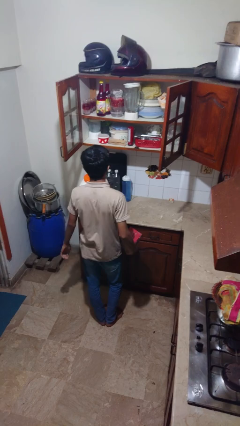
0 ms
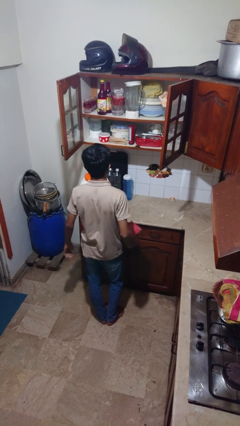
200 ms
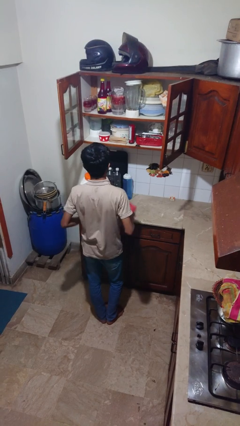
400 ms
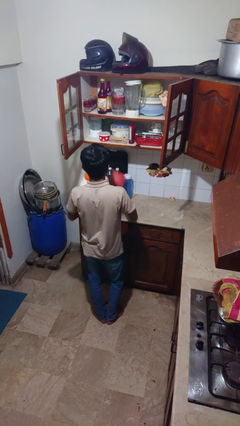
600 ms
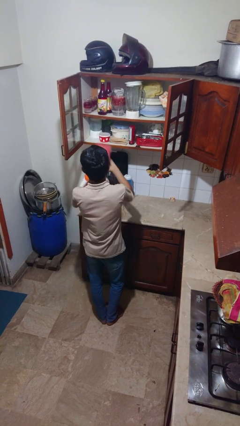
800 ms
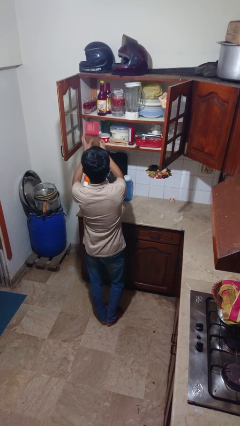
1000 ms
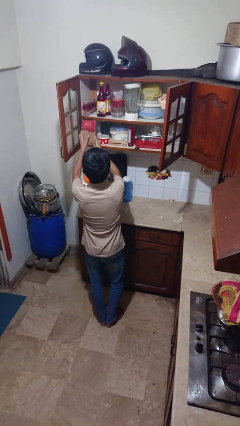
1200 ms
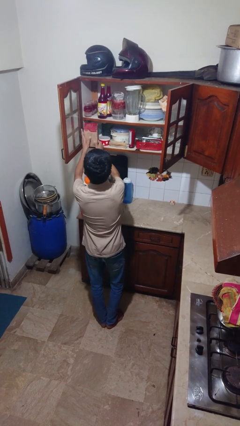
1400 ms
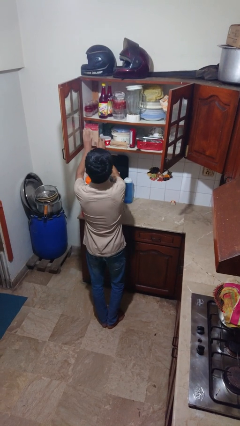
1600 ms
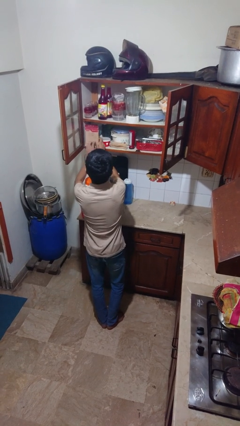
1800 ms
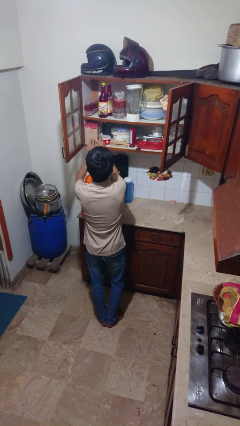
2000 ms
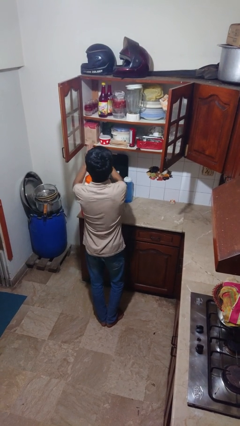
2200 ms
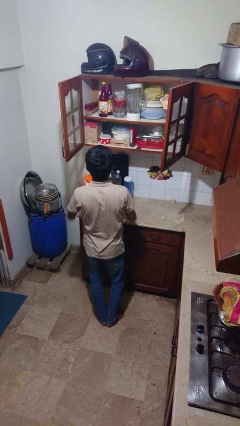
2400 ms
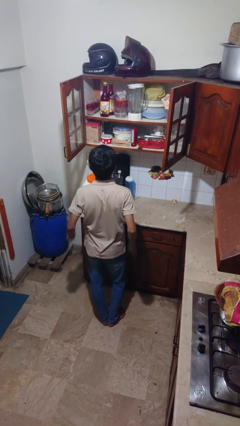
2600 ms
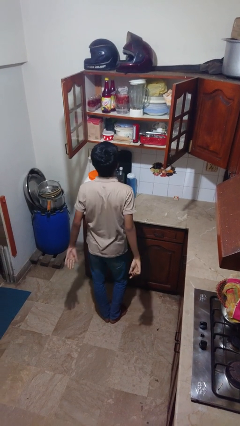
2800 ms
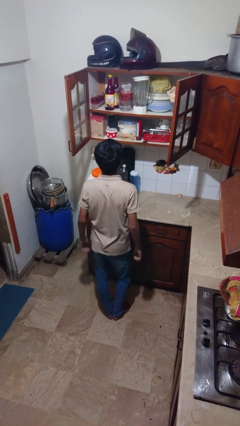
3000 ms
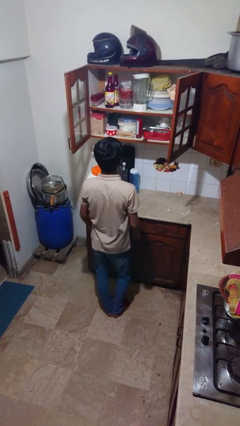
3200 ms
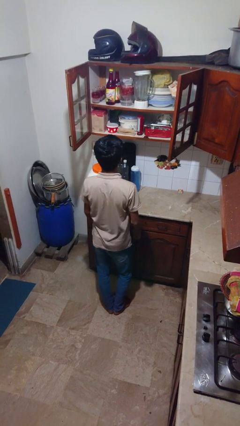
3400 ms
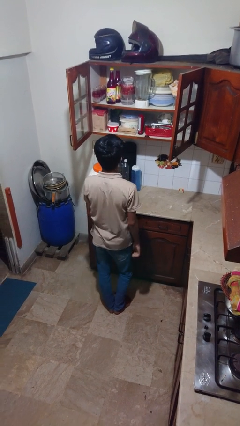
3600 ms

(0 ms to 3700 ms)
person puts down object into cabinet

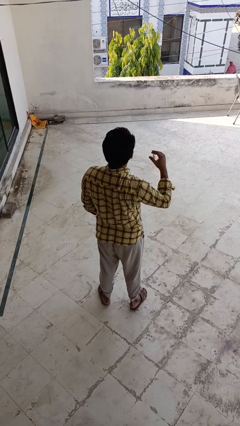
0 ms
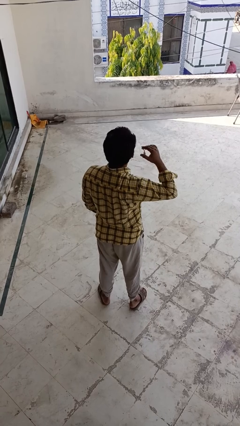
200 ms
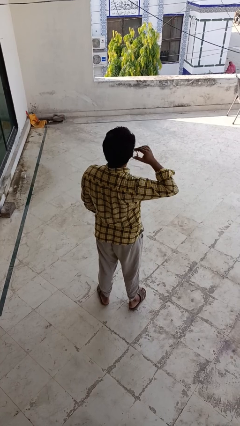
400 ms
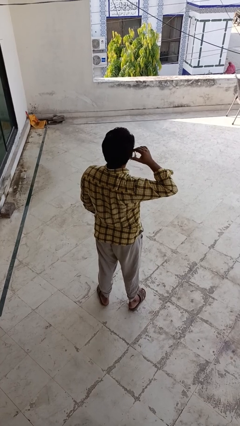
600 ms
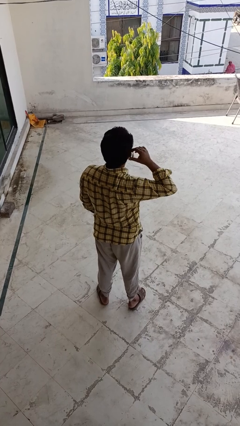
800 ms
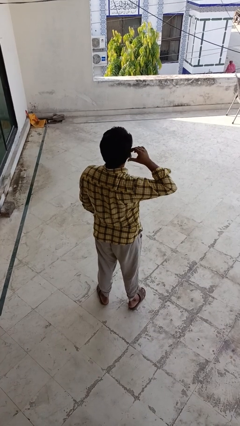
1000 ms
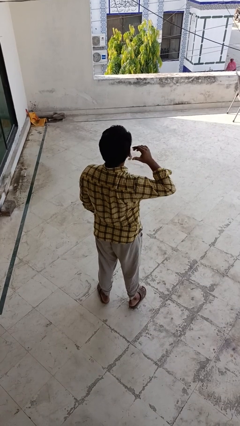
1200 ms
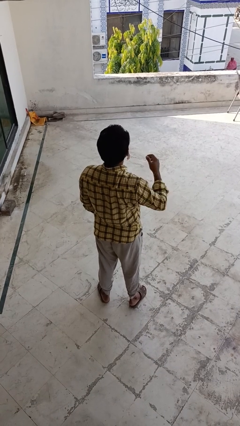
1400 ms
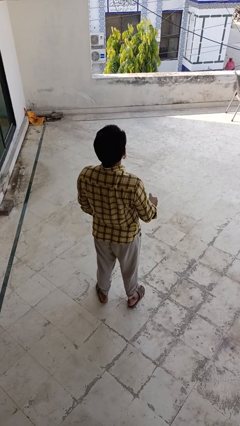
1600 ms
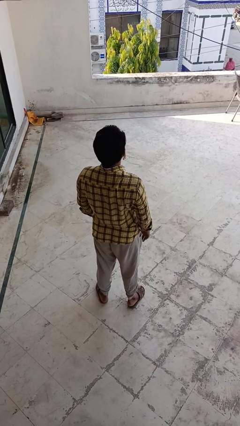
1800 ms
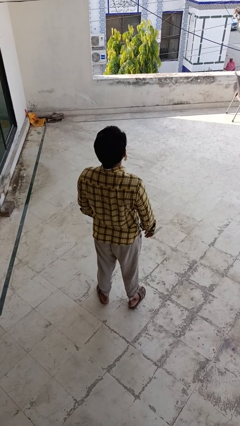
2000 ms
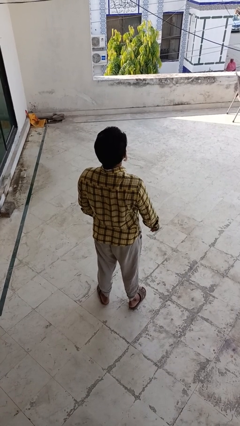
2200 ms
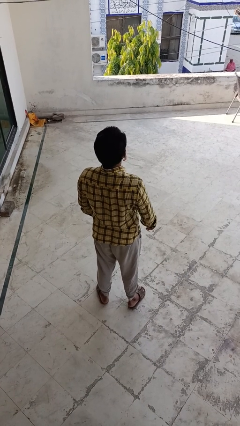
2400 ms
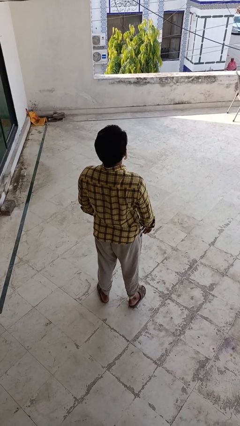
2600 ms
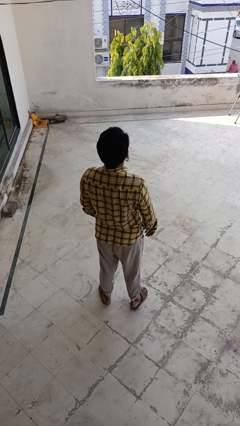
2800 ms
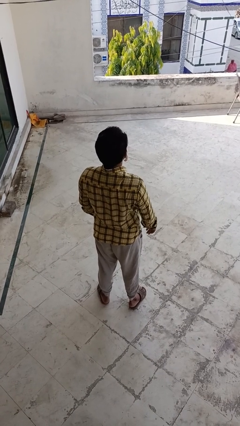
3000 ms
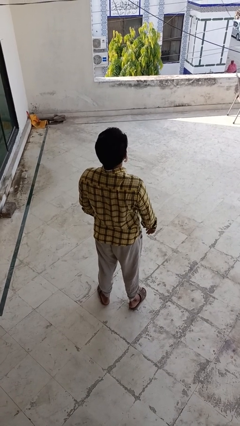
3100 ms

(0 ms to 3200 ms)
person puts on earrings

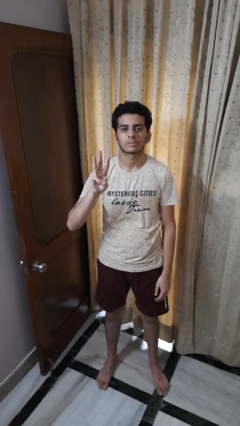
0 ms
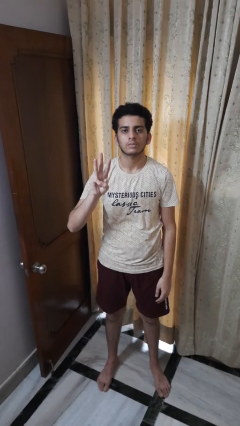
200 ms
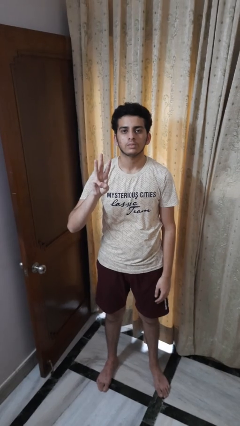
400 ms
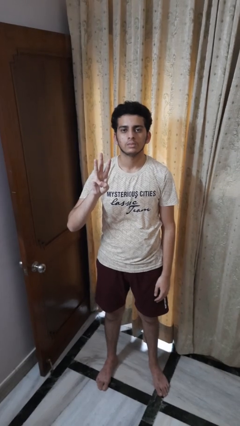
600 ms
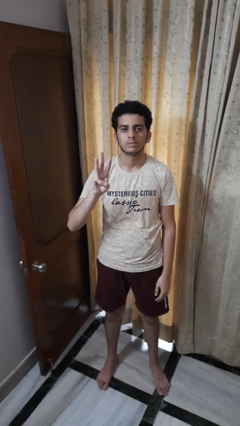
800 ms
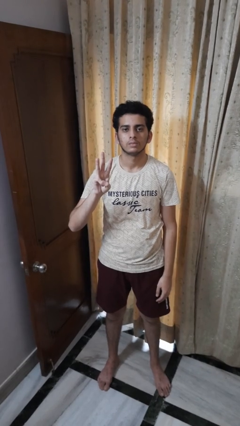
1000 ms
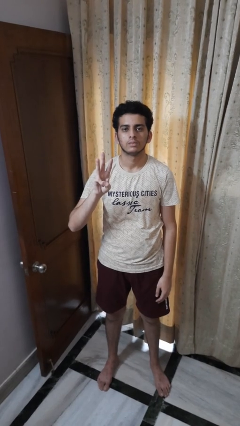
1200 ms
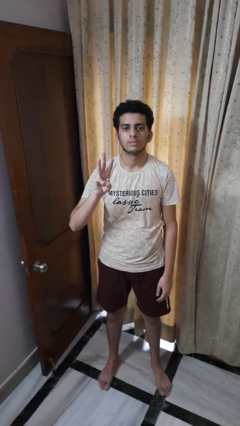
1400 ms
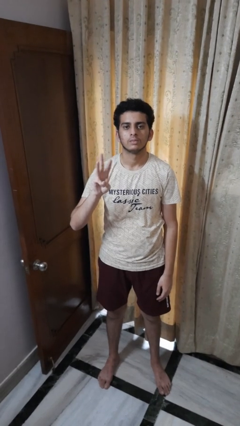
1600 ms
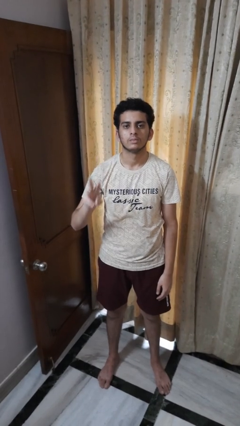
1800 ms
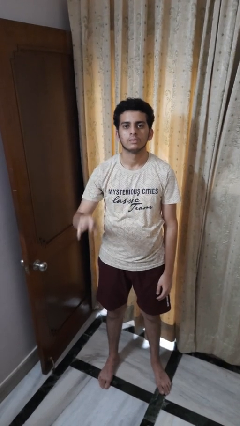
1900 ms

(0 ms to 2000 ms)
person gestures number three

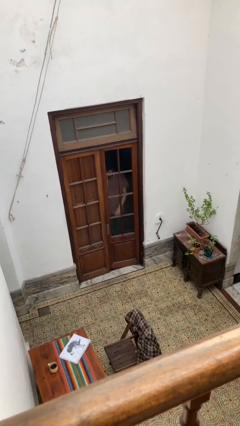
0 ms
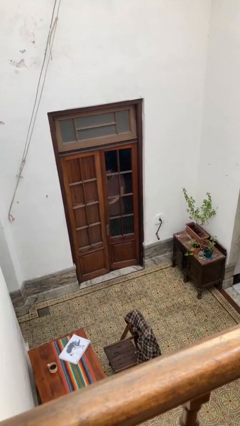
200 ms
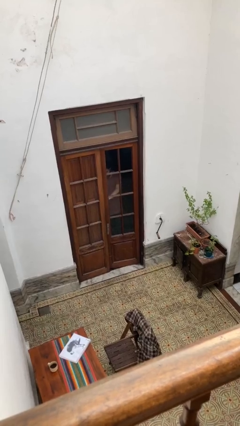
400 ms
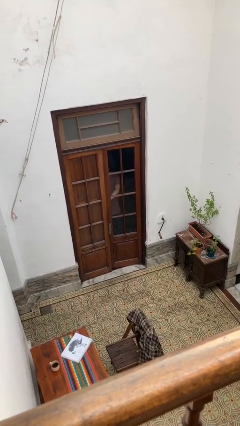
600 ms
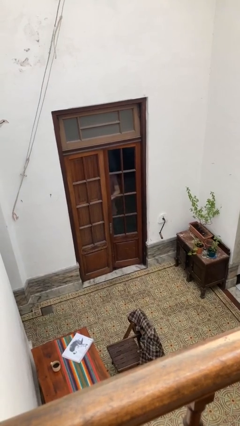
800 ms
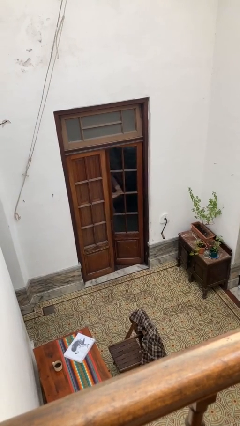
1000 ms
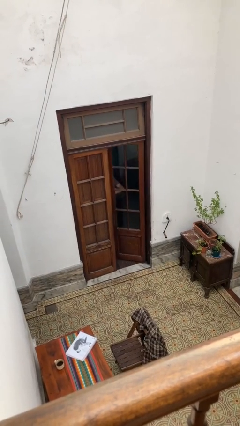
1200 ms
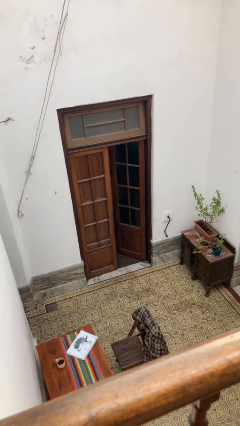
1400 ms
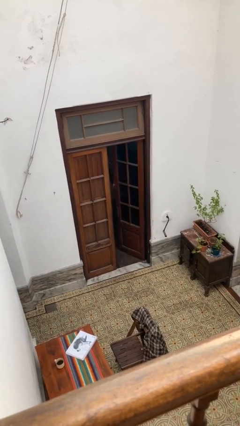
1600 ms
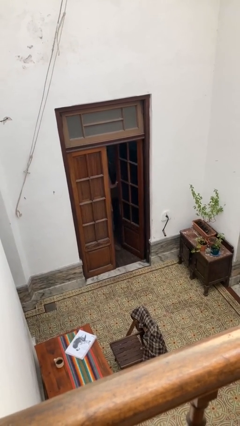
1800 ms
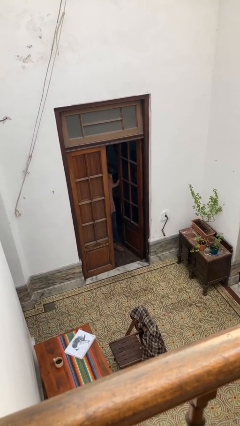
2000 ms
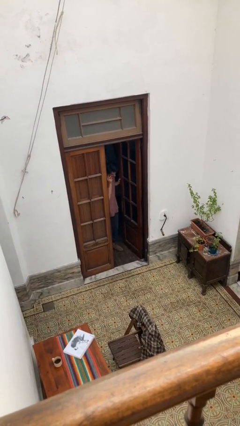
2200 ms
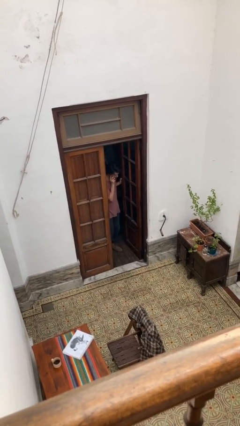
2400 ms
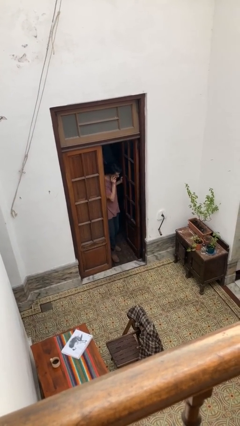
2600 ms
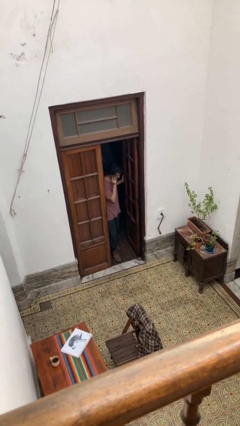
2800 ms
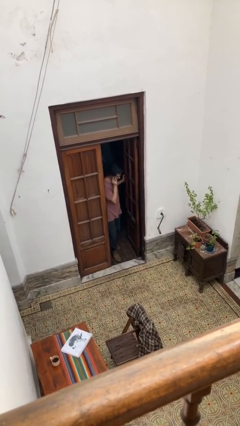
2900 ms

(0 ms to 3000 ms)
person opens facility door

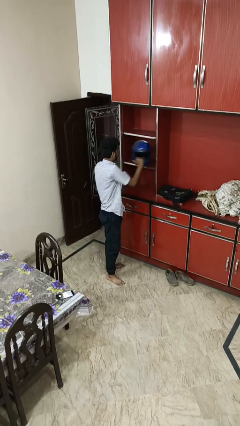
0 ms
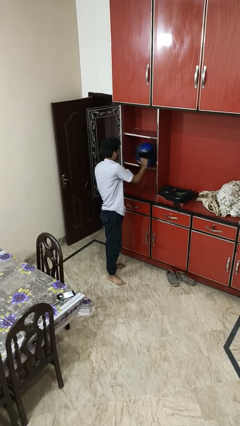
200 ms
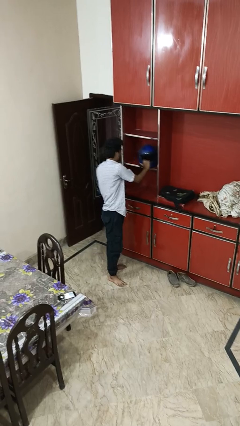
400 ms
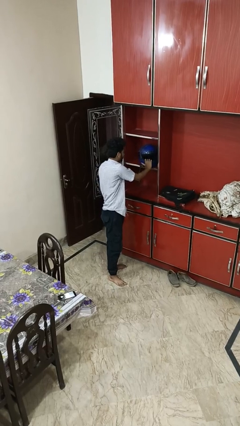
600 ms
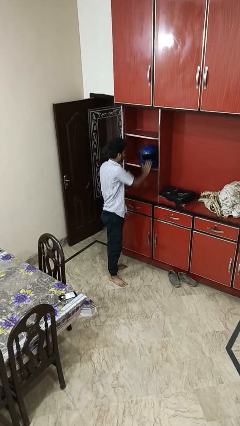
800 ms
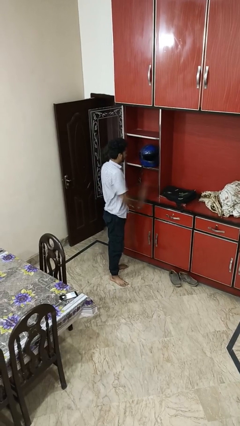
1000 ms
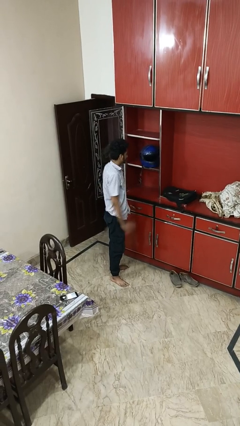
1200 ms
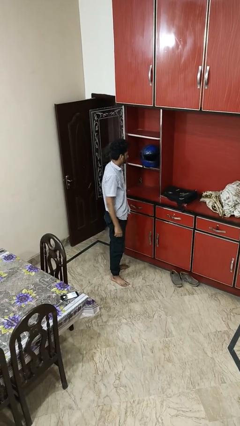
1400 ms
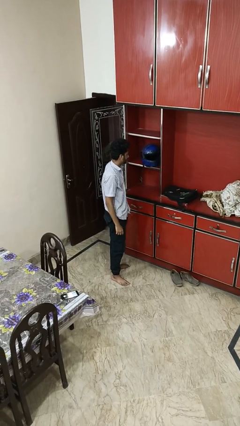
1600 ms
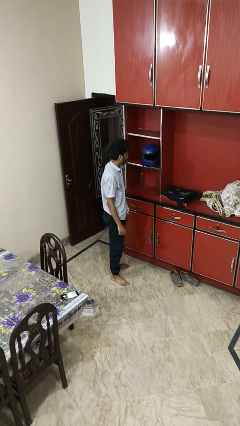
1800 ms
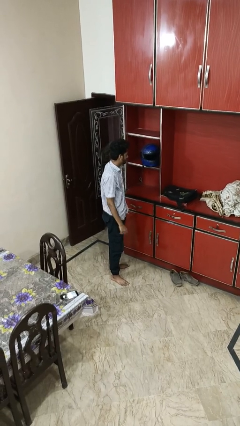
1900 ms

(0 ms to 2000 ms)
person puts down object on shelf

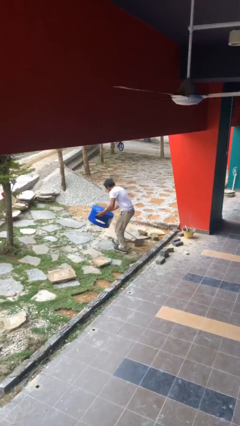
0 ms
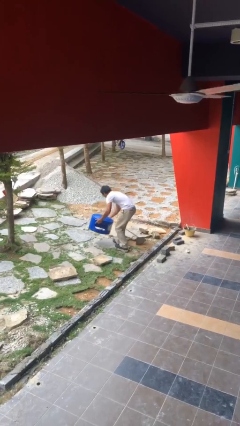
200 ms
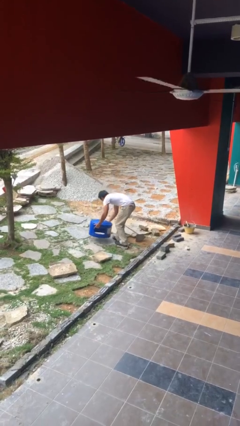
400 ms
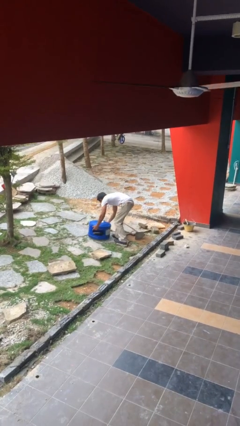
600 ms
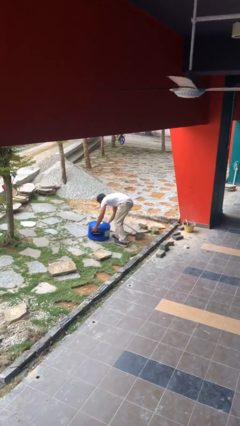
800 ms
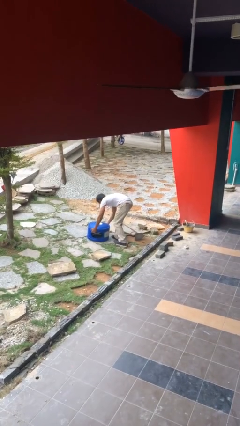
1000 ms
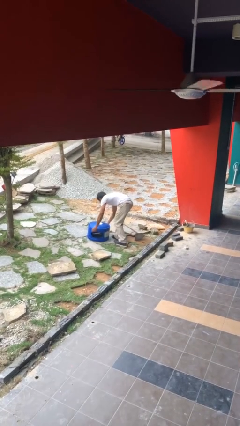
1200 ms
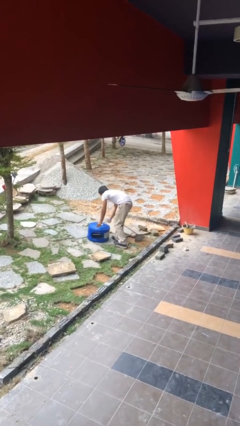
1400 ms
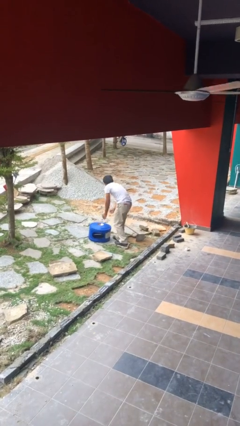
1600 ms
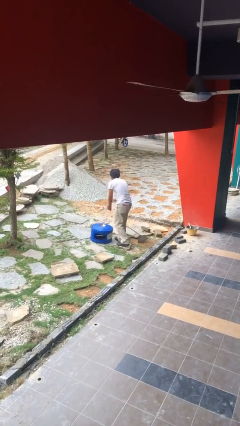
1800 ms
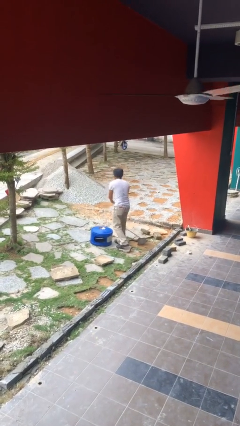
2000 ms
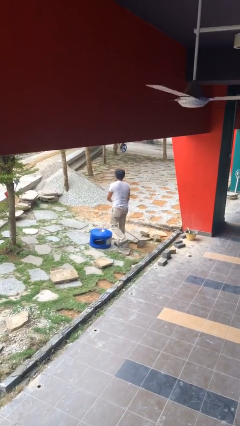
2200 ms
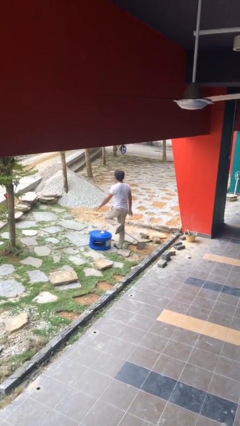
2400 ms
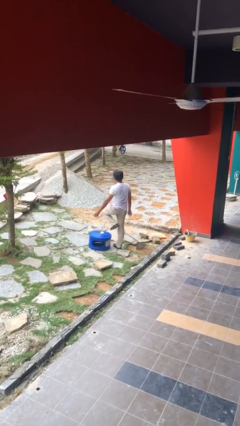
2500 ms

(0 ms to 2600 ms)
person puts down object on floor

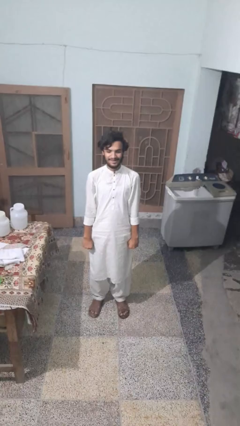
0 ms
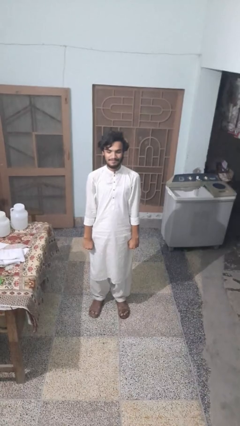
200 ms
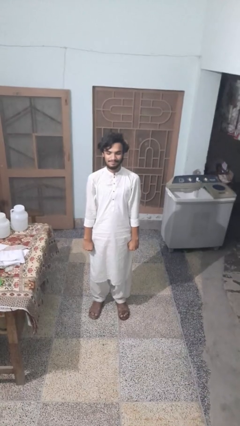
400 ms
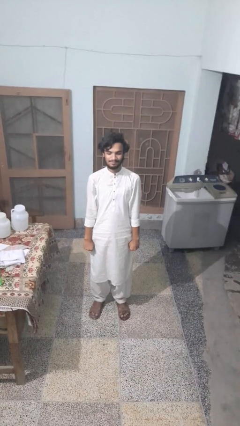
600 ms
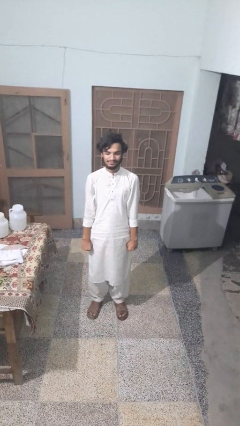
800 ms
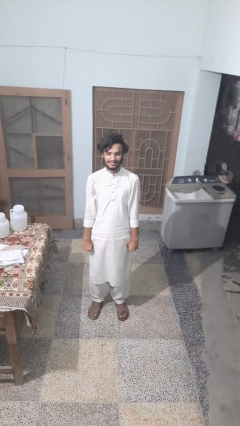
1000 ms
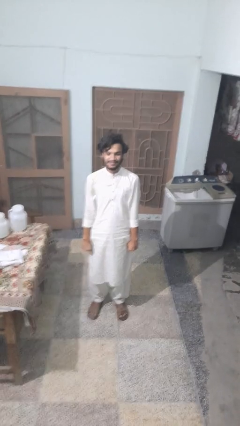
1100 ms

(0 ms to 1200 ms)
person stands up
